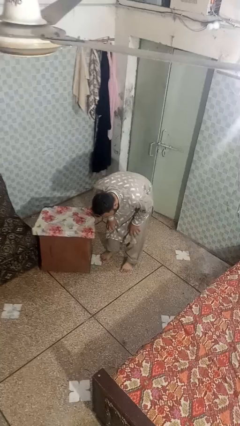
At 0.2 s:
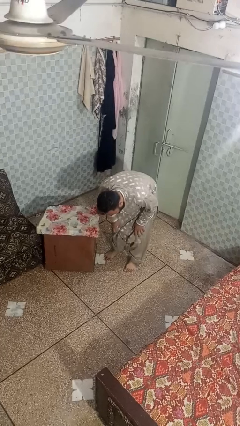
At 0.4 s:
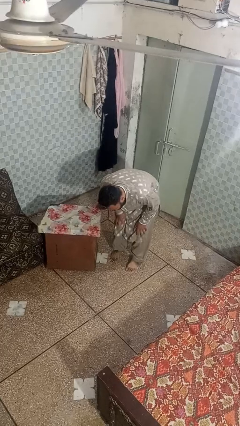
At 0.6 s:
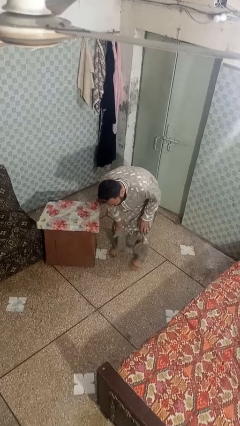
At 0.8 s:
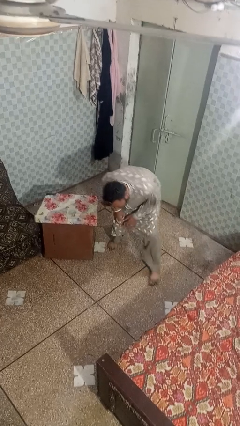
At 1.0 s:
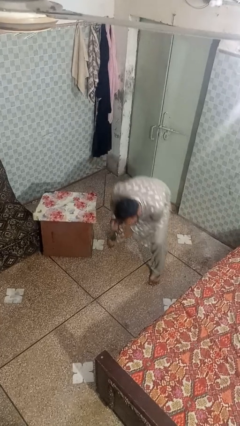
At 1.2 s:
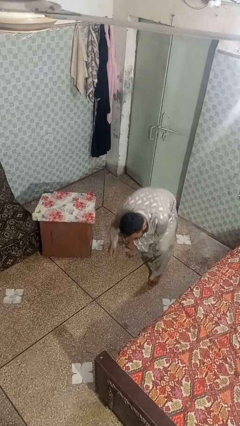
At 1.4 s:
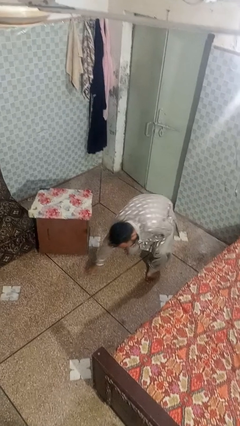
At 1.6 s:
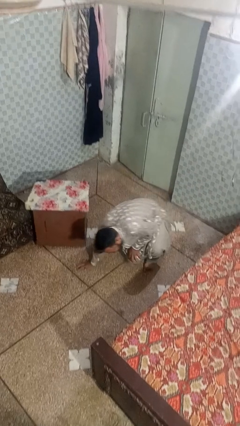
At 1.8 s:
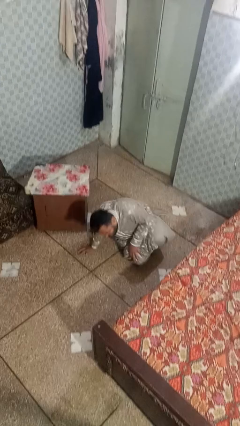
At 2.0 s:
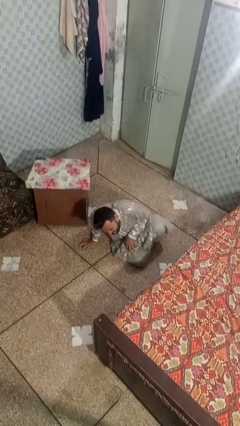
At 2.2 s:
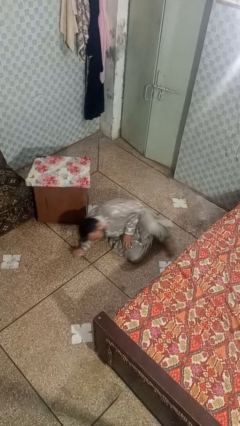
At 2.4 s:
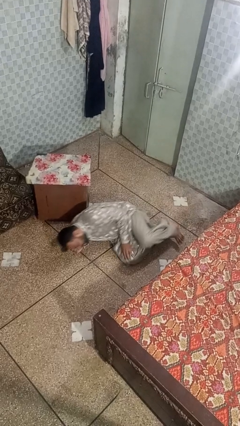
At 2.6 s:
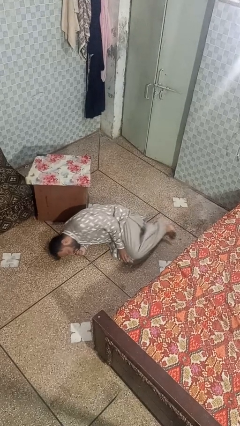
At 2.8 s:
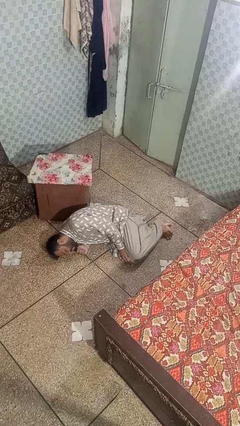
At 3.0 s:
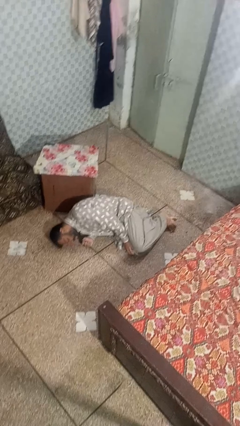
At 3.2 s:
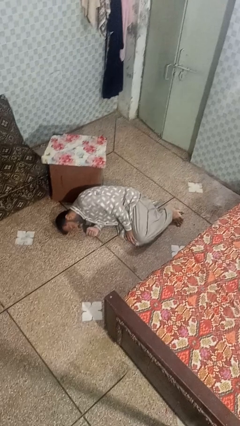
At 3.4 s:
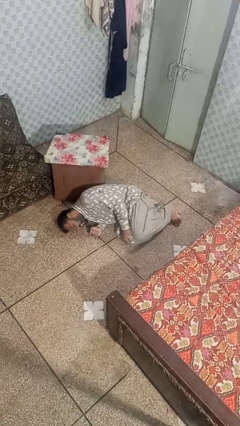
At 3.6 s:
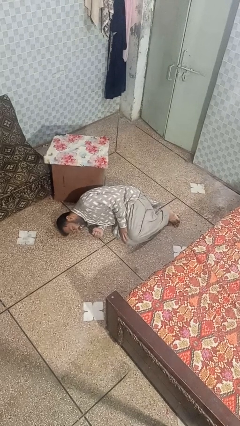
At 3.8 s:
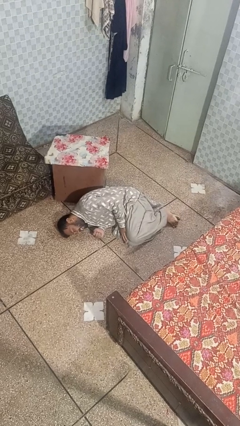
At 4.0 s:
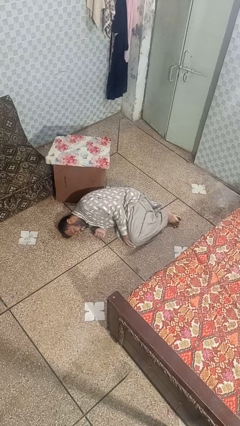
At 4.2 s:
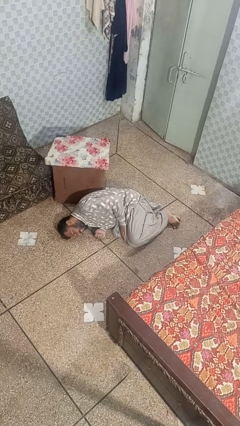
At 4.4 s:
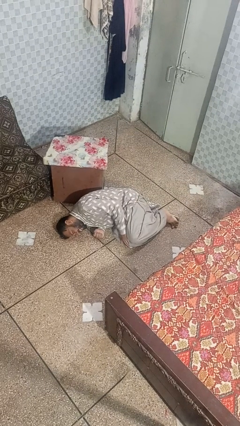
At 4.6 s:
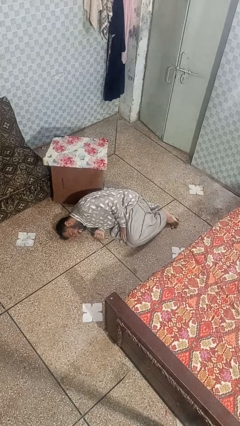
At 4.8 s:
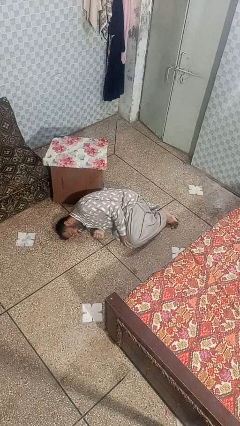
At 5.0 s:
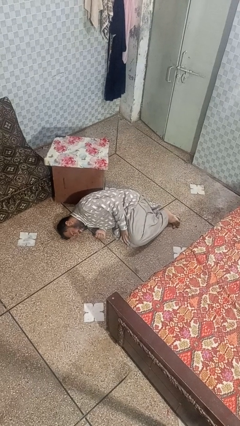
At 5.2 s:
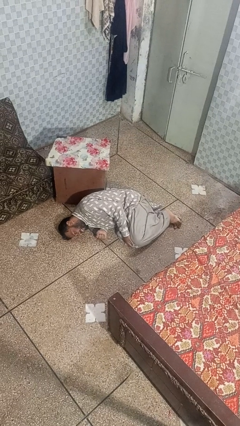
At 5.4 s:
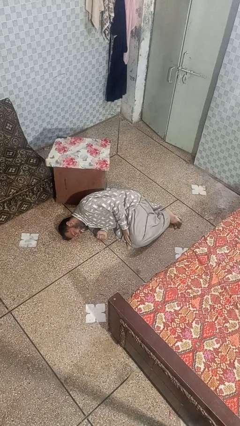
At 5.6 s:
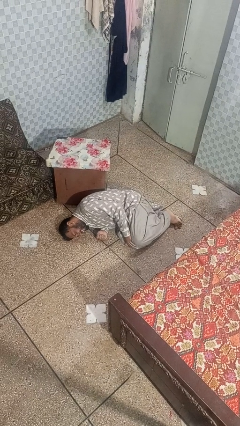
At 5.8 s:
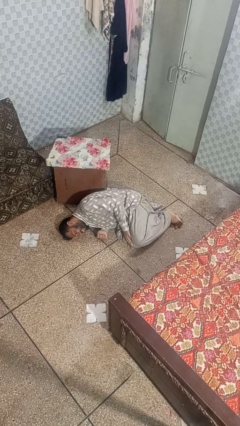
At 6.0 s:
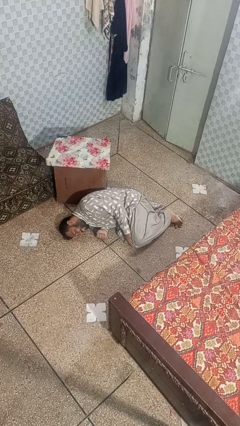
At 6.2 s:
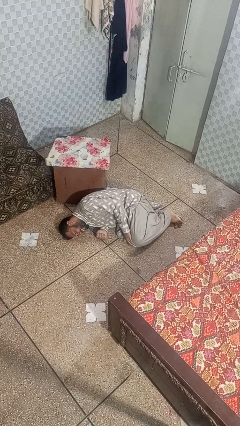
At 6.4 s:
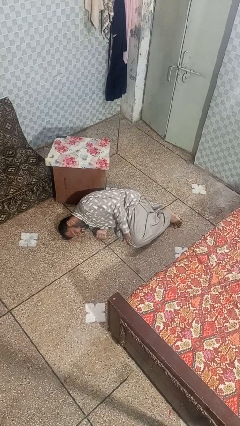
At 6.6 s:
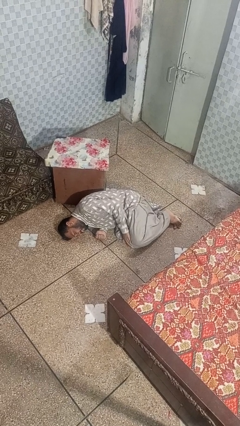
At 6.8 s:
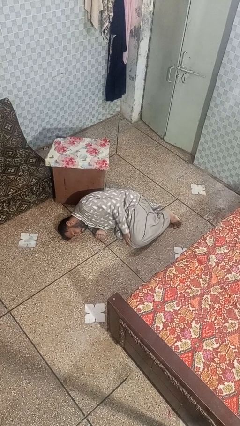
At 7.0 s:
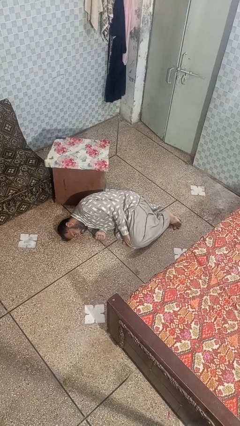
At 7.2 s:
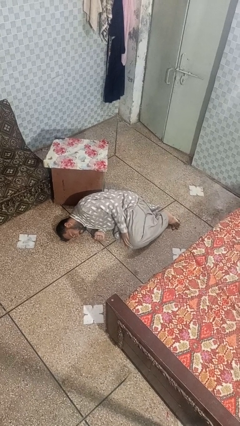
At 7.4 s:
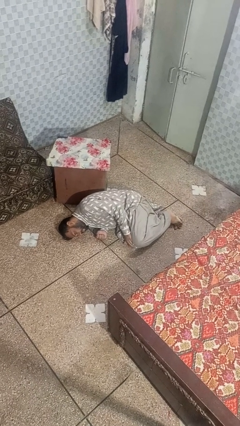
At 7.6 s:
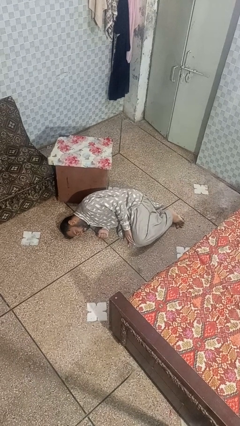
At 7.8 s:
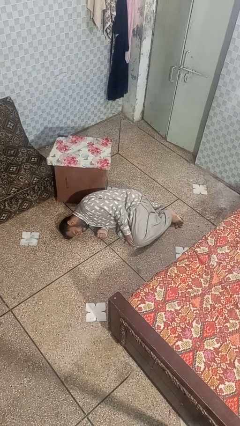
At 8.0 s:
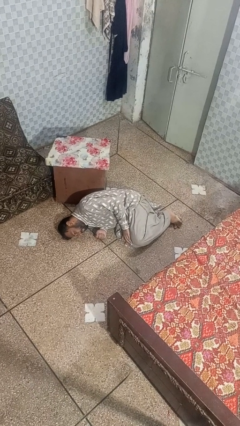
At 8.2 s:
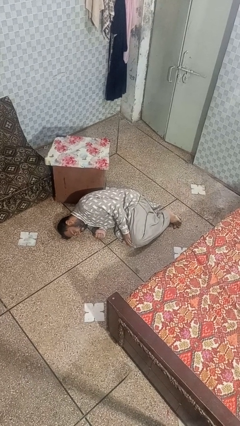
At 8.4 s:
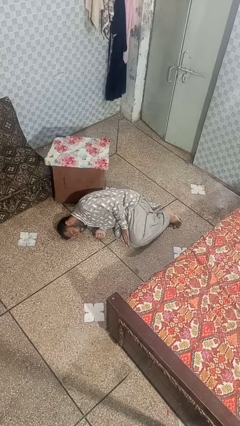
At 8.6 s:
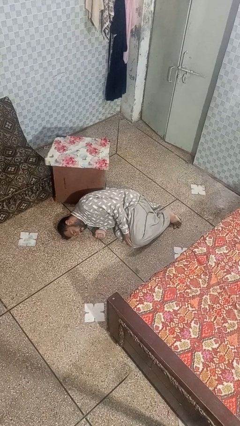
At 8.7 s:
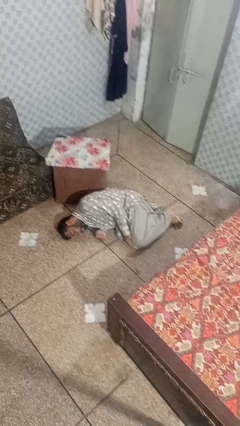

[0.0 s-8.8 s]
person lies down on floor

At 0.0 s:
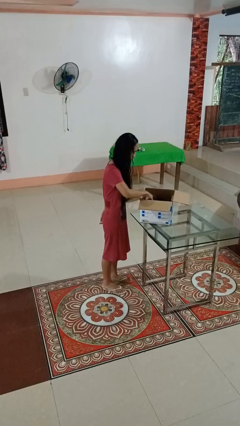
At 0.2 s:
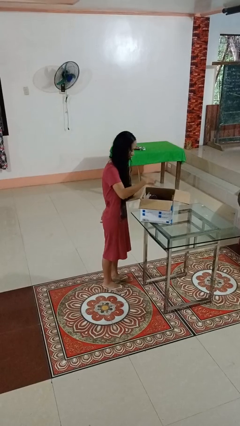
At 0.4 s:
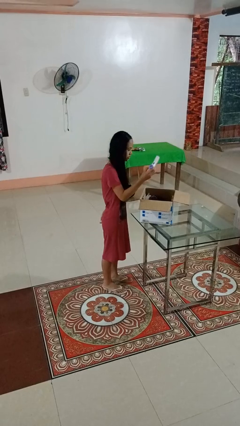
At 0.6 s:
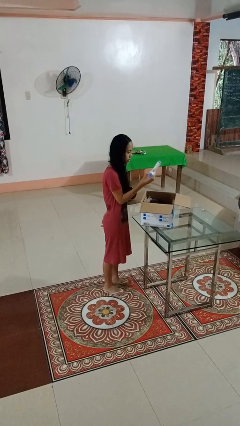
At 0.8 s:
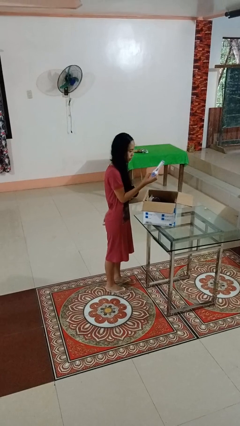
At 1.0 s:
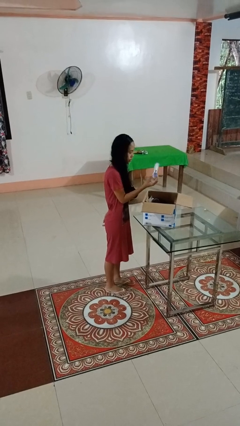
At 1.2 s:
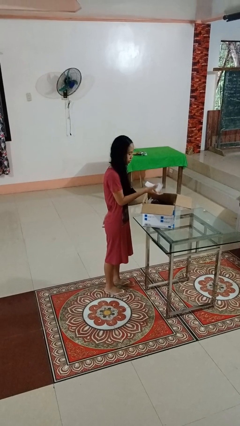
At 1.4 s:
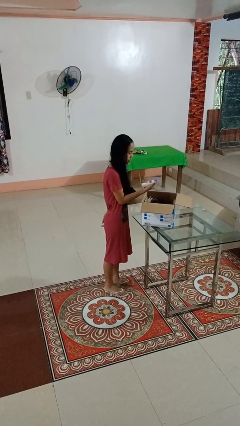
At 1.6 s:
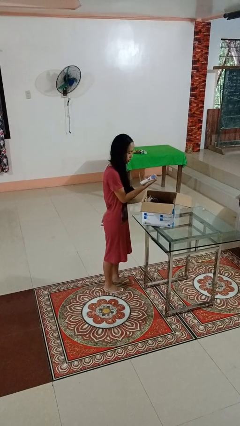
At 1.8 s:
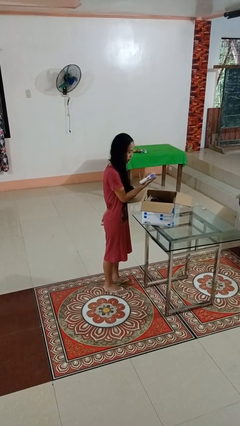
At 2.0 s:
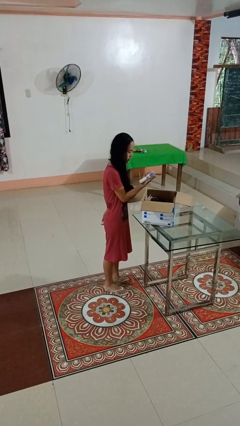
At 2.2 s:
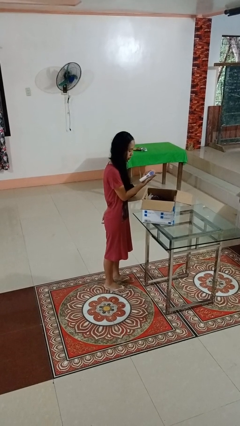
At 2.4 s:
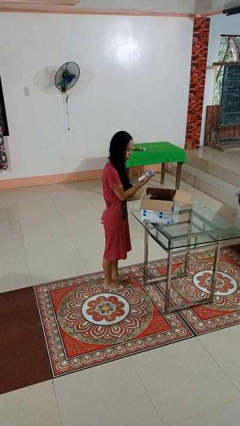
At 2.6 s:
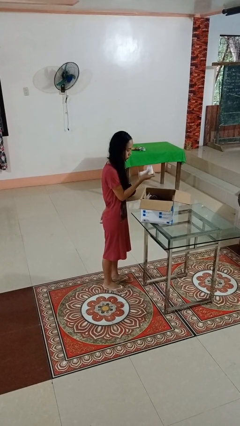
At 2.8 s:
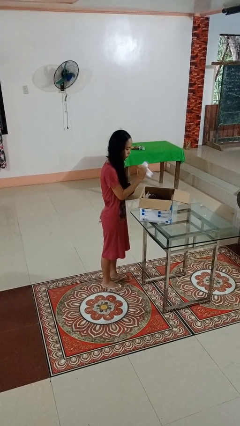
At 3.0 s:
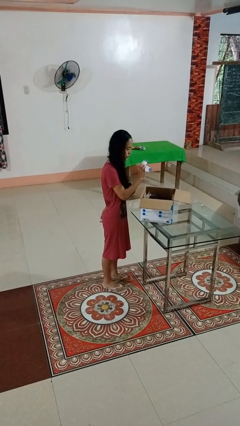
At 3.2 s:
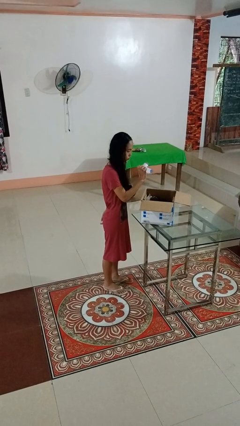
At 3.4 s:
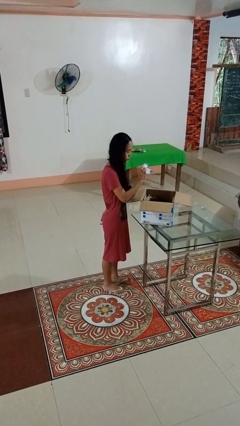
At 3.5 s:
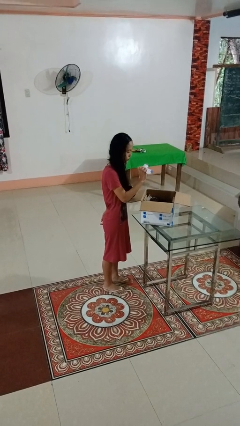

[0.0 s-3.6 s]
person takes object from box

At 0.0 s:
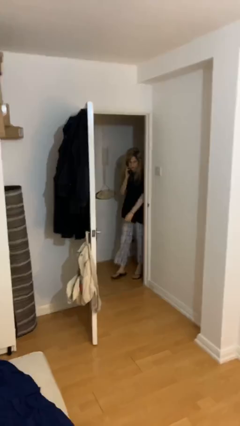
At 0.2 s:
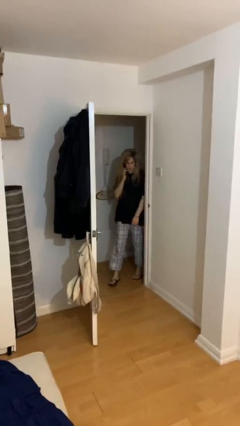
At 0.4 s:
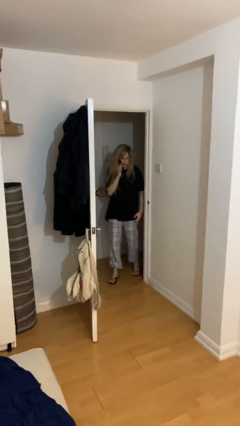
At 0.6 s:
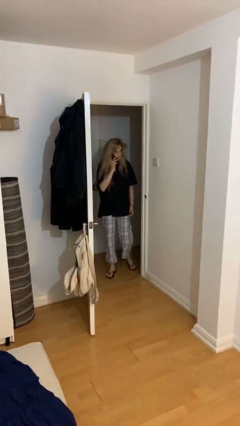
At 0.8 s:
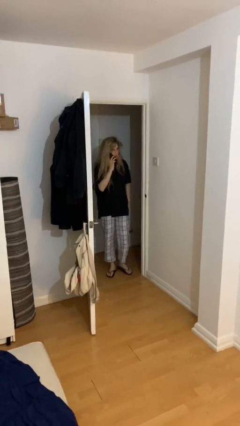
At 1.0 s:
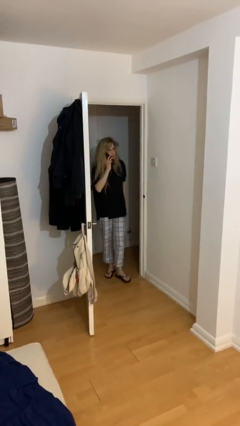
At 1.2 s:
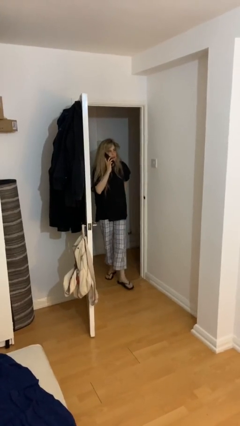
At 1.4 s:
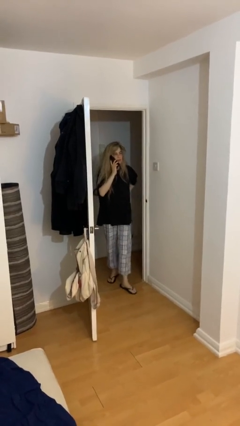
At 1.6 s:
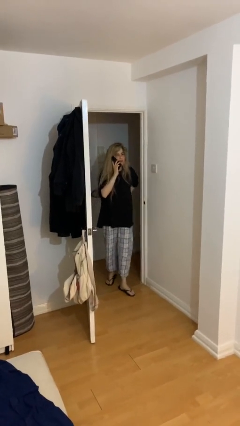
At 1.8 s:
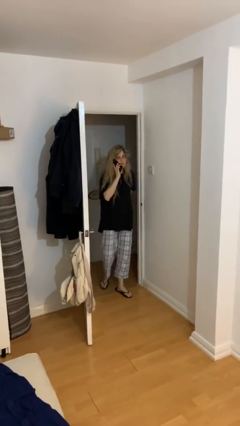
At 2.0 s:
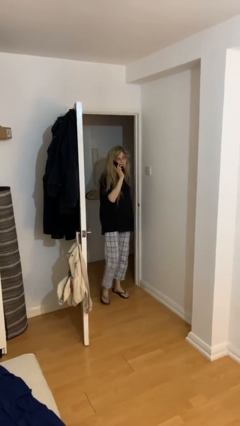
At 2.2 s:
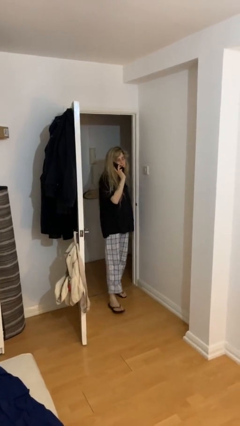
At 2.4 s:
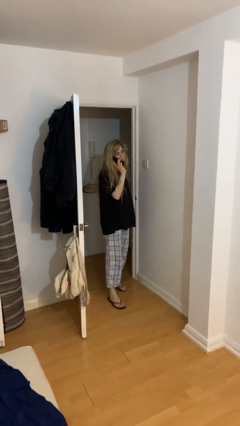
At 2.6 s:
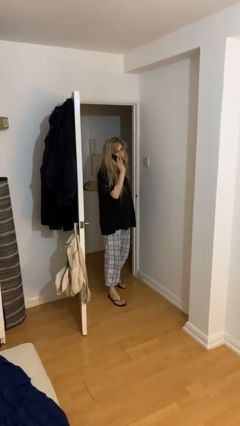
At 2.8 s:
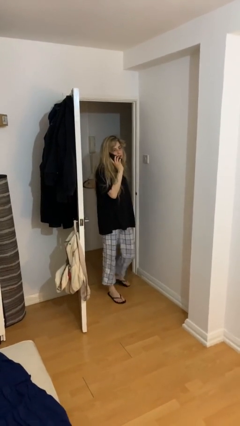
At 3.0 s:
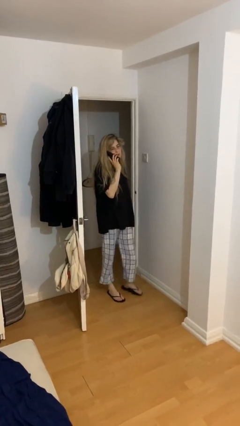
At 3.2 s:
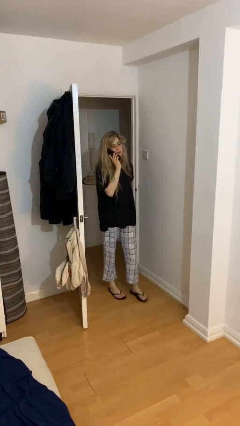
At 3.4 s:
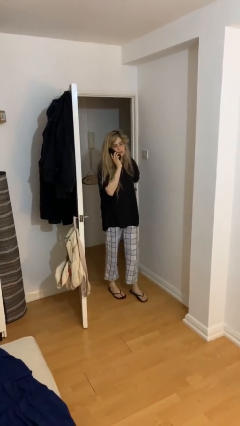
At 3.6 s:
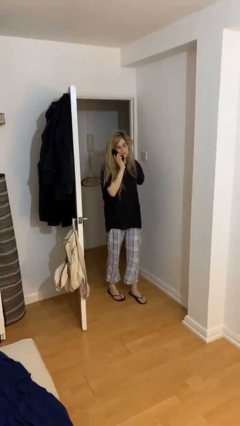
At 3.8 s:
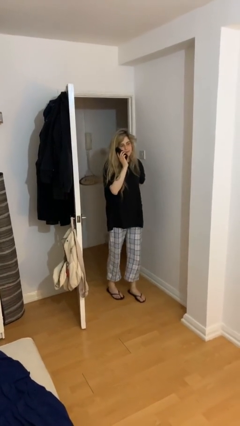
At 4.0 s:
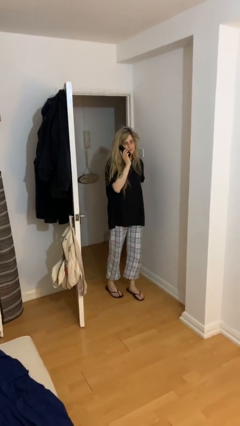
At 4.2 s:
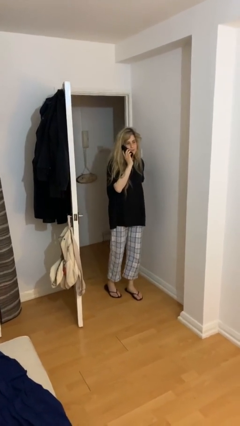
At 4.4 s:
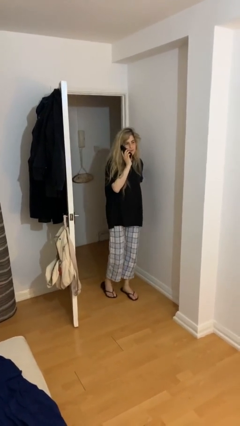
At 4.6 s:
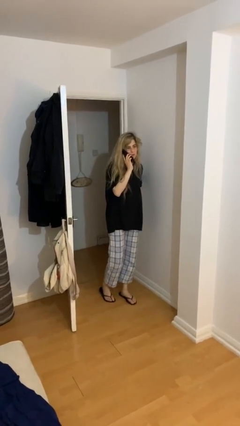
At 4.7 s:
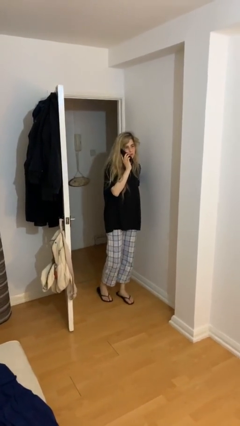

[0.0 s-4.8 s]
person enters scene through structure

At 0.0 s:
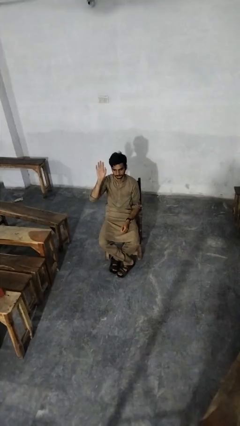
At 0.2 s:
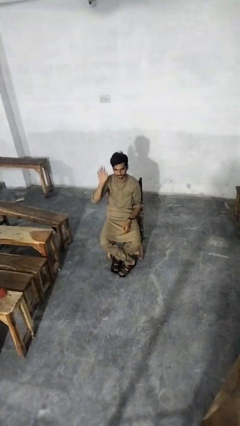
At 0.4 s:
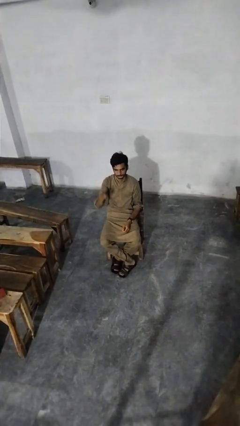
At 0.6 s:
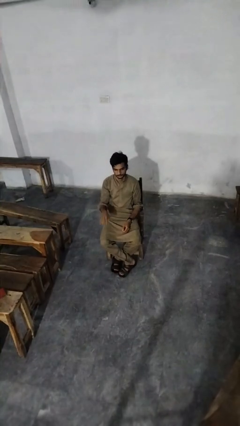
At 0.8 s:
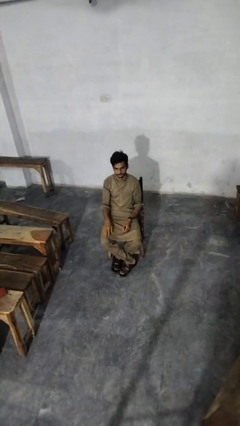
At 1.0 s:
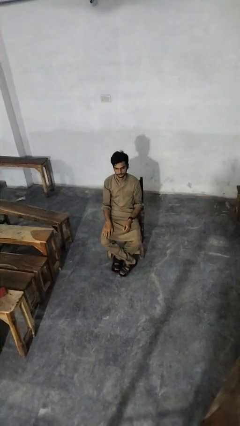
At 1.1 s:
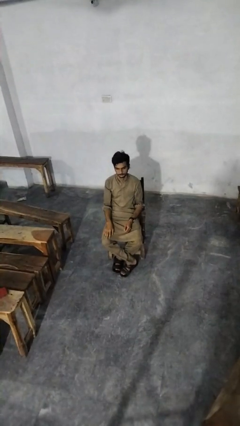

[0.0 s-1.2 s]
person gestures lower hand
